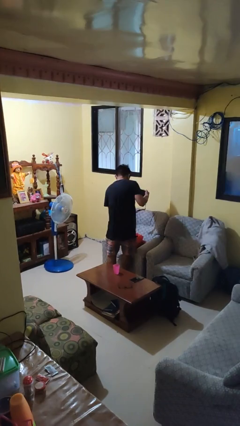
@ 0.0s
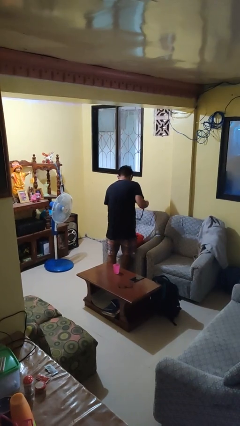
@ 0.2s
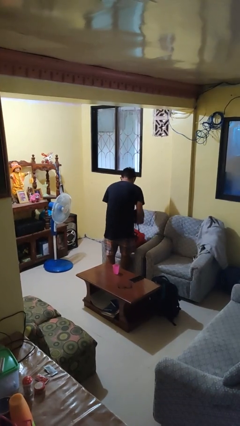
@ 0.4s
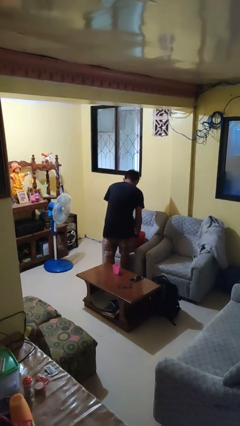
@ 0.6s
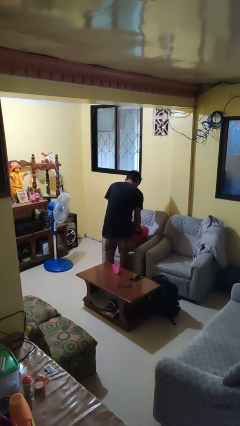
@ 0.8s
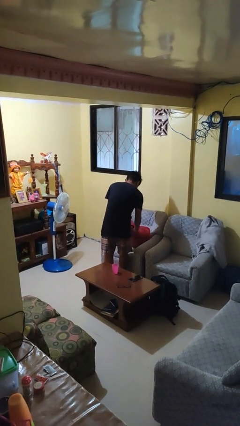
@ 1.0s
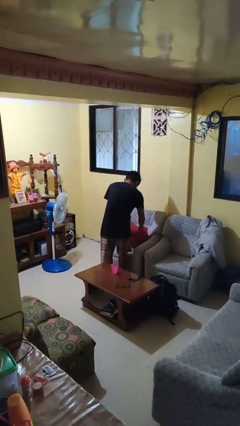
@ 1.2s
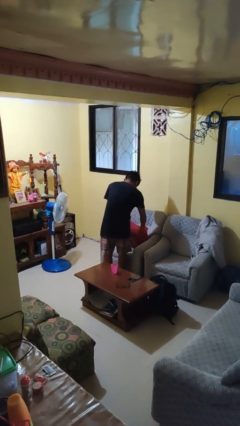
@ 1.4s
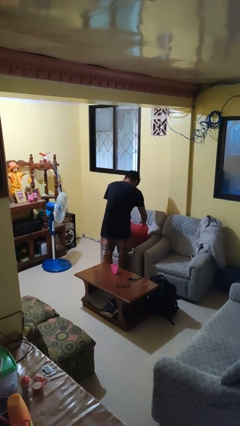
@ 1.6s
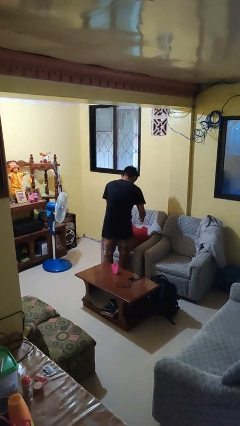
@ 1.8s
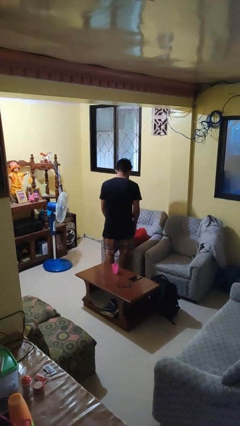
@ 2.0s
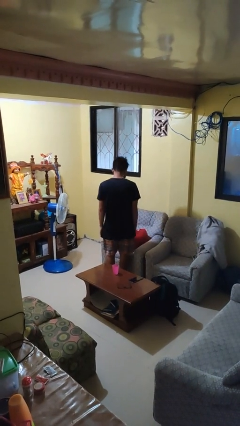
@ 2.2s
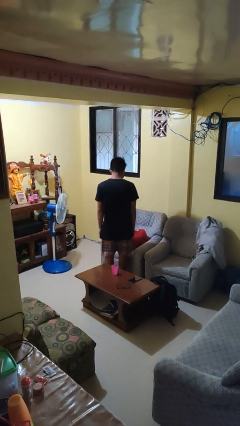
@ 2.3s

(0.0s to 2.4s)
person puts object into bag

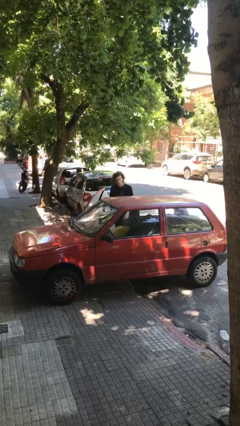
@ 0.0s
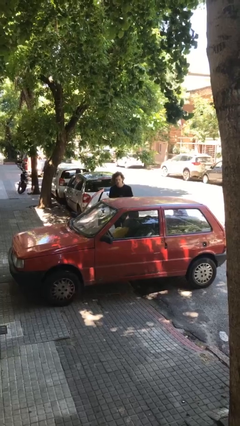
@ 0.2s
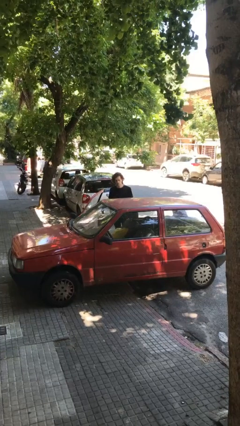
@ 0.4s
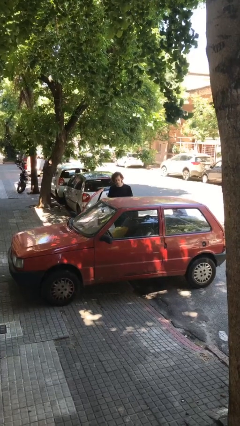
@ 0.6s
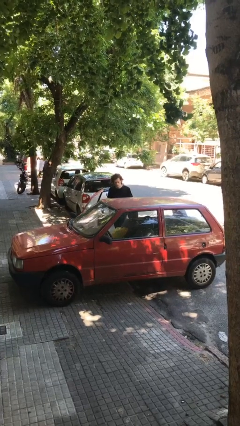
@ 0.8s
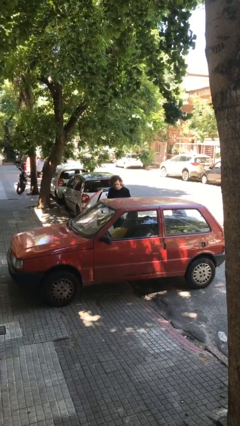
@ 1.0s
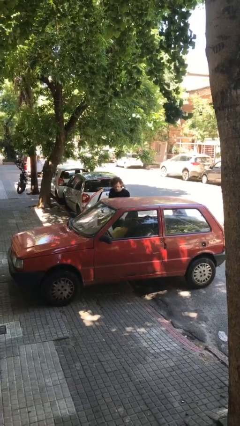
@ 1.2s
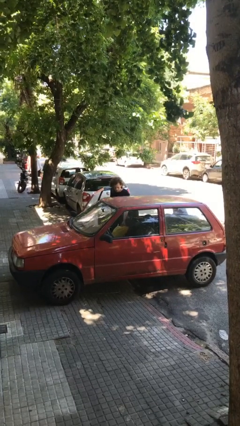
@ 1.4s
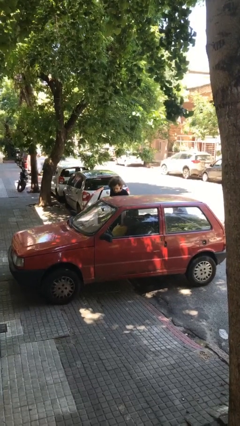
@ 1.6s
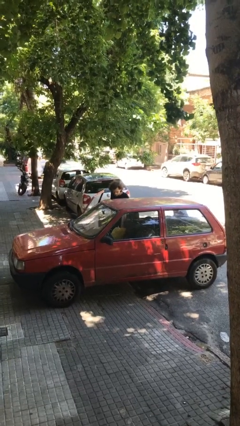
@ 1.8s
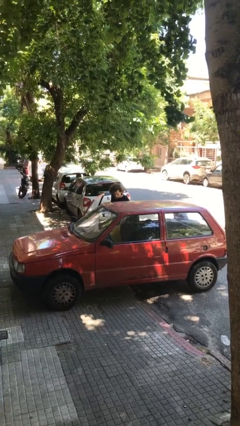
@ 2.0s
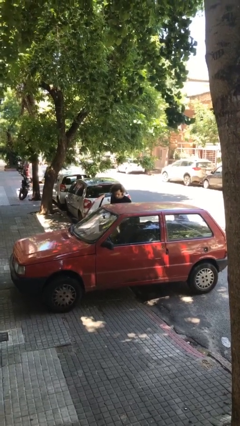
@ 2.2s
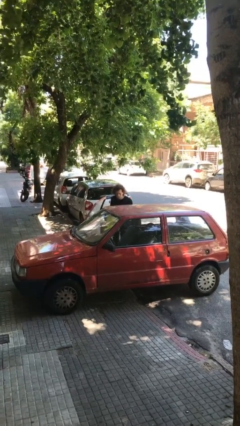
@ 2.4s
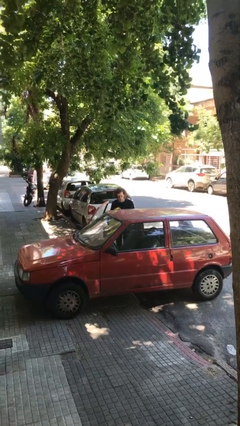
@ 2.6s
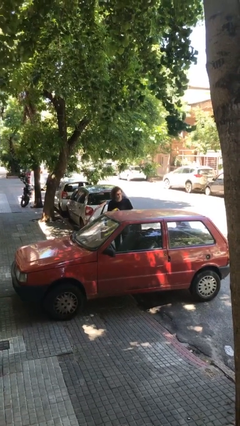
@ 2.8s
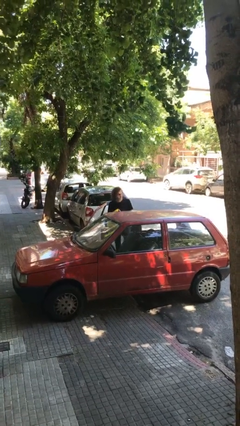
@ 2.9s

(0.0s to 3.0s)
person unloads car

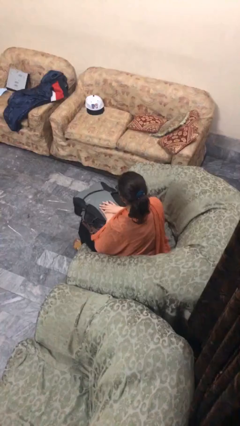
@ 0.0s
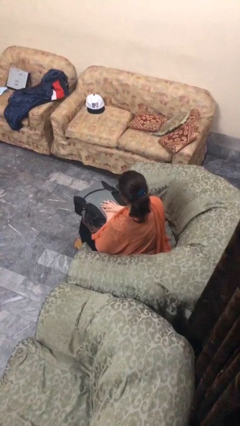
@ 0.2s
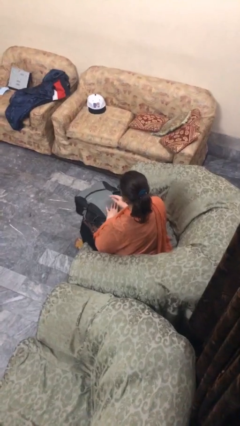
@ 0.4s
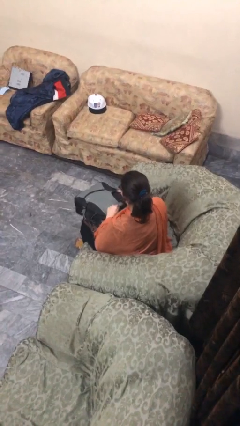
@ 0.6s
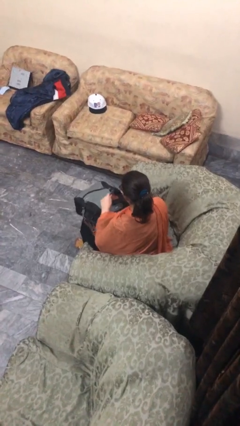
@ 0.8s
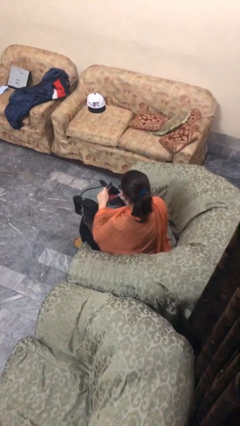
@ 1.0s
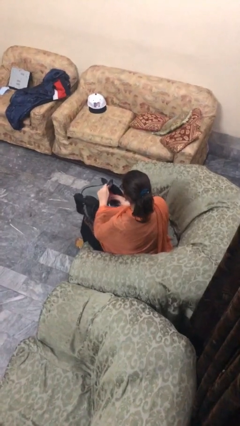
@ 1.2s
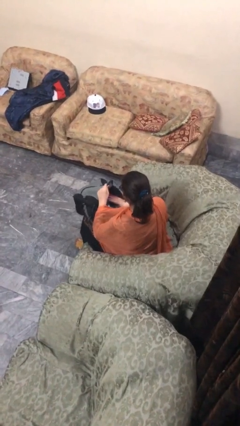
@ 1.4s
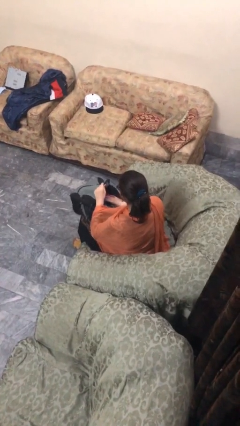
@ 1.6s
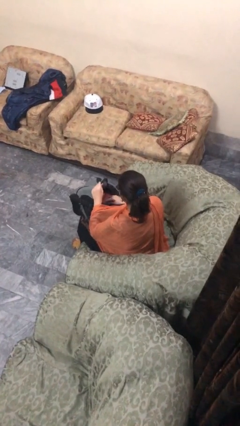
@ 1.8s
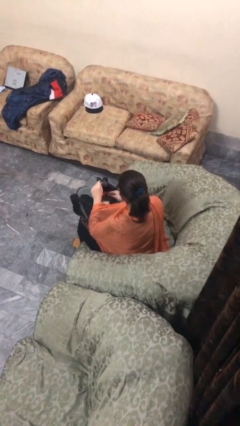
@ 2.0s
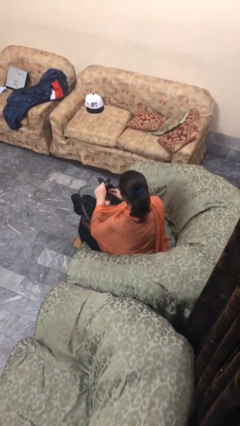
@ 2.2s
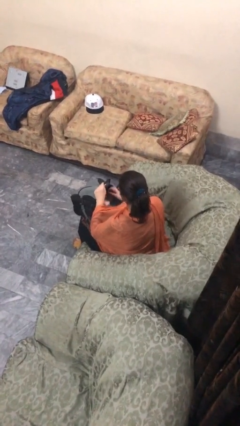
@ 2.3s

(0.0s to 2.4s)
person searches in backpack

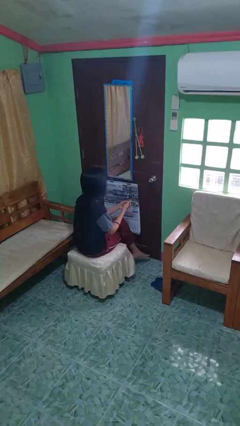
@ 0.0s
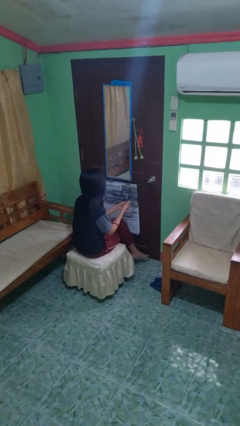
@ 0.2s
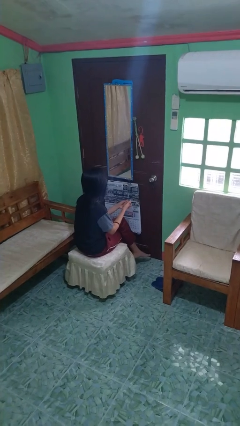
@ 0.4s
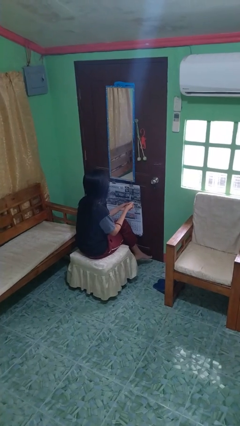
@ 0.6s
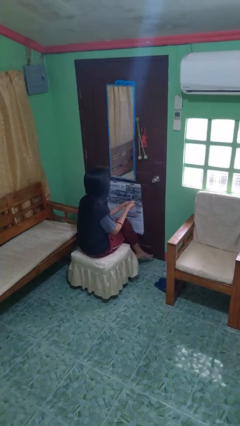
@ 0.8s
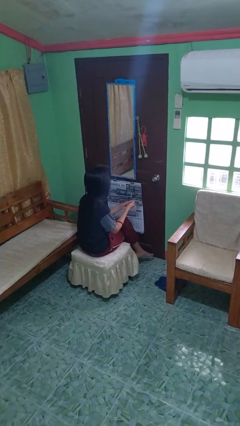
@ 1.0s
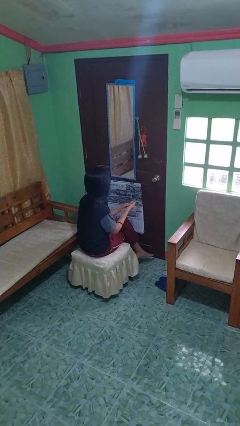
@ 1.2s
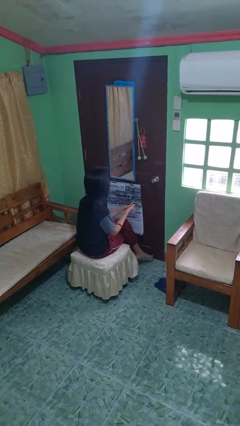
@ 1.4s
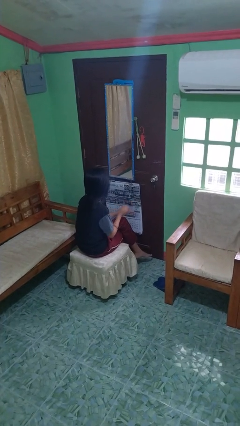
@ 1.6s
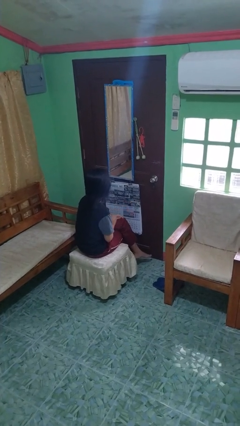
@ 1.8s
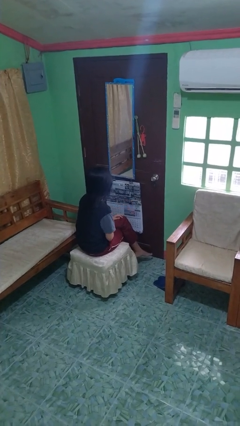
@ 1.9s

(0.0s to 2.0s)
person cracks knuckles

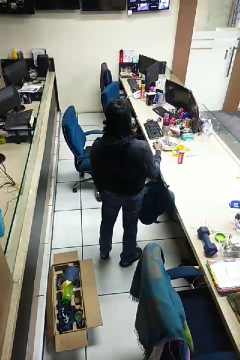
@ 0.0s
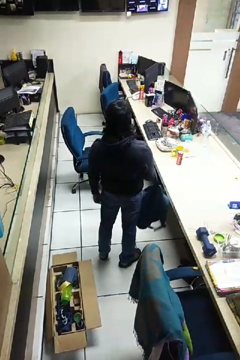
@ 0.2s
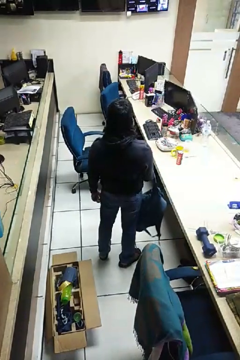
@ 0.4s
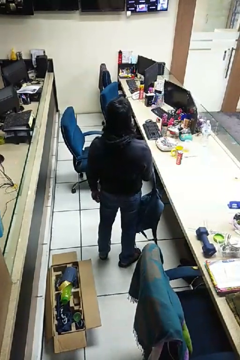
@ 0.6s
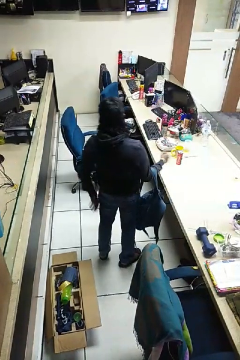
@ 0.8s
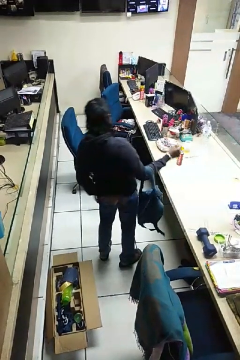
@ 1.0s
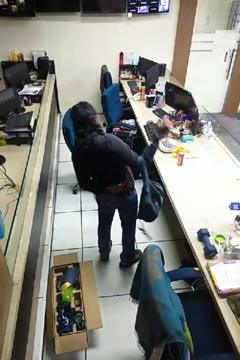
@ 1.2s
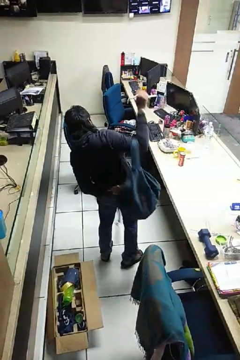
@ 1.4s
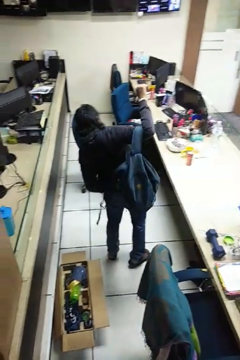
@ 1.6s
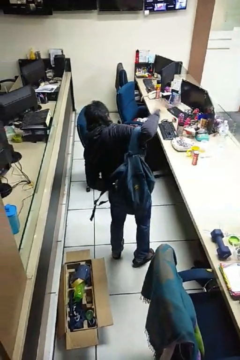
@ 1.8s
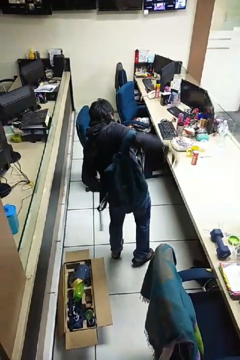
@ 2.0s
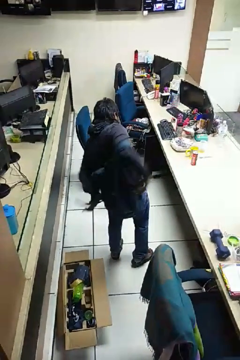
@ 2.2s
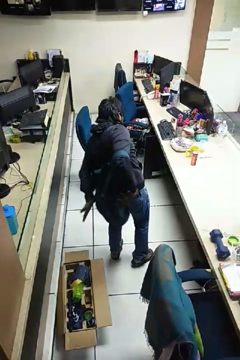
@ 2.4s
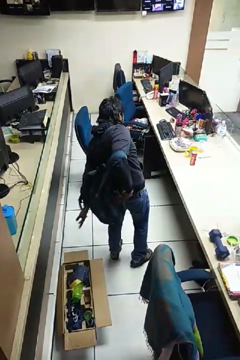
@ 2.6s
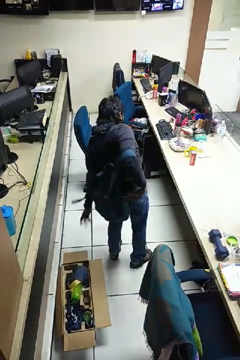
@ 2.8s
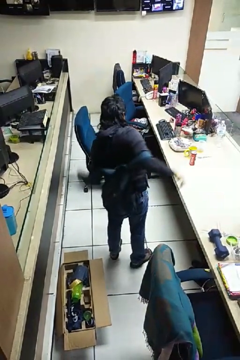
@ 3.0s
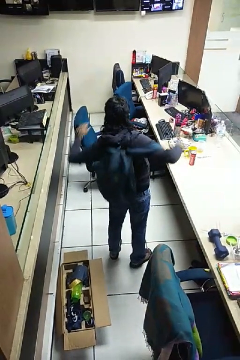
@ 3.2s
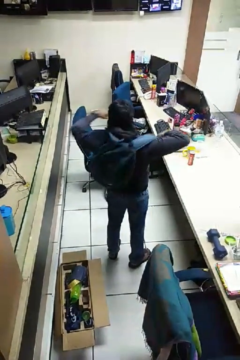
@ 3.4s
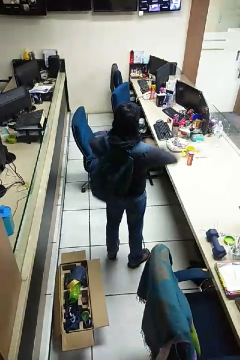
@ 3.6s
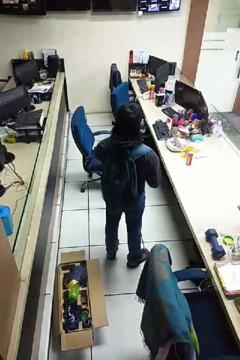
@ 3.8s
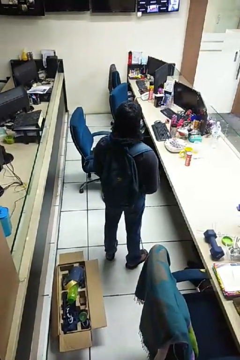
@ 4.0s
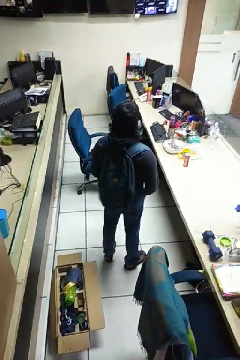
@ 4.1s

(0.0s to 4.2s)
person puts on backpack

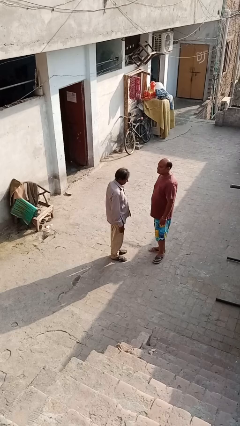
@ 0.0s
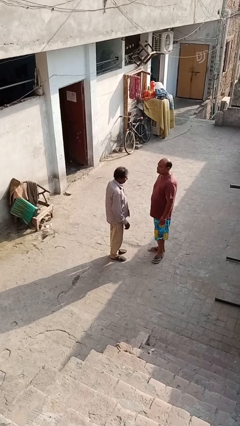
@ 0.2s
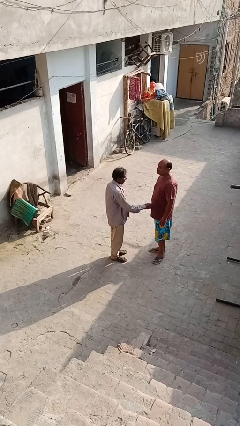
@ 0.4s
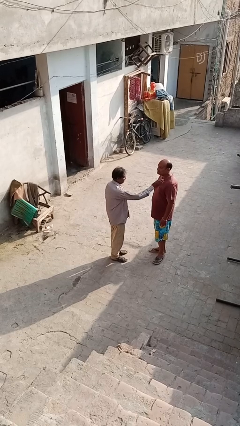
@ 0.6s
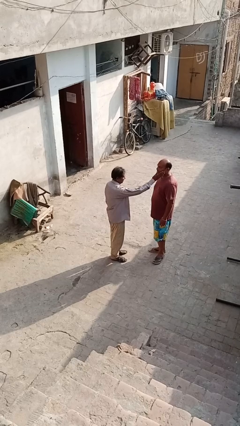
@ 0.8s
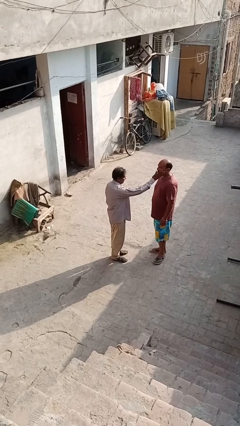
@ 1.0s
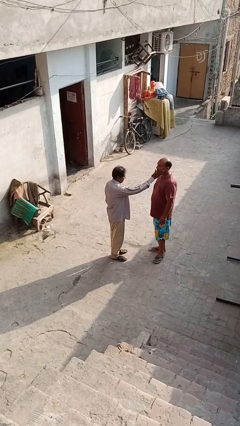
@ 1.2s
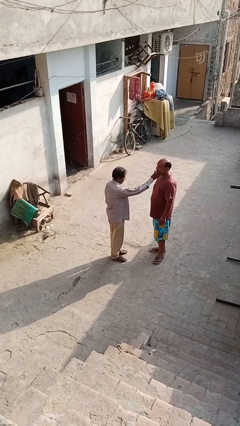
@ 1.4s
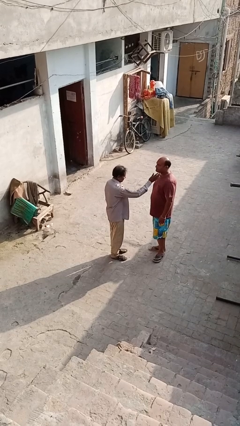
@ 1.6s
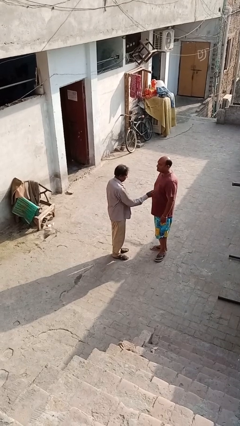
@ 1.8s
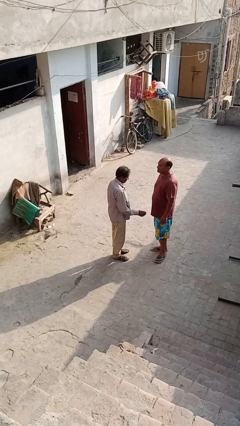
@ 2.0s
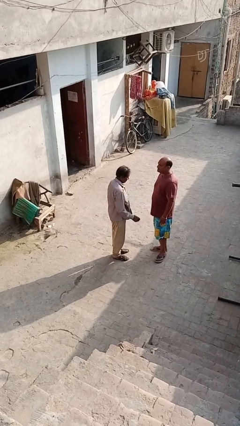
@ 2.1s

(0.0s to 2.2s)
person touches face of person

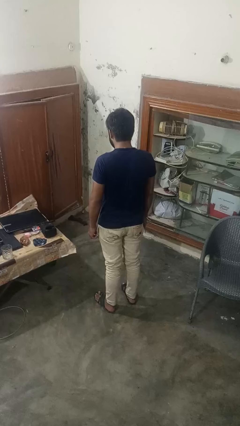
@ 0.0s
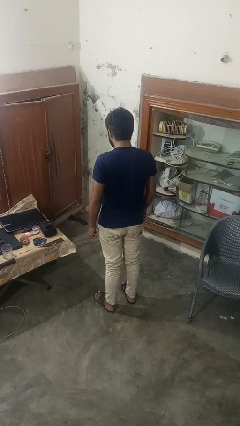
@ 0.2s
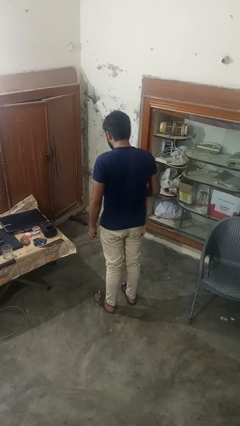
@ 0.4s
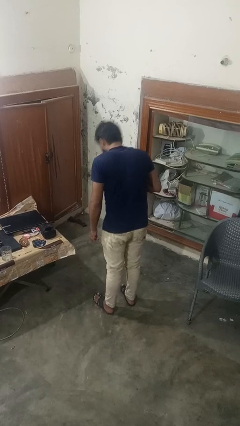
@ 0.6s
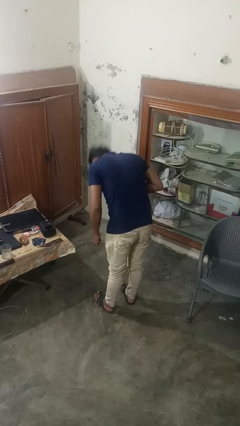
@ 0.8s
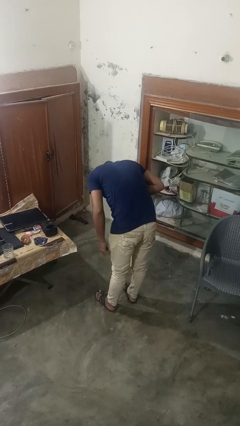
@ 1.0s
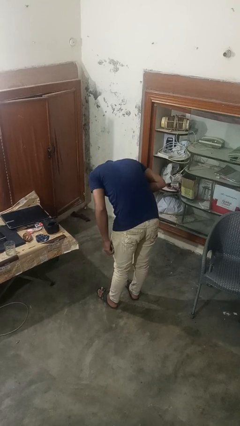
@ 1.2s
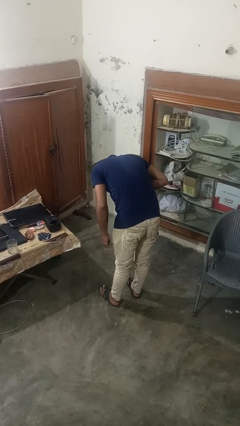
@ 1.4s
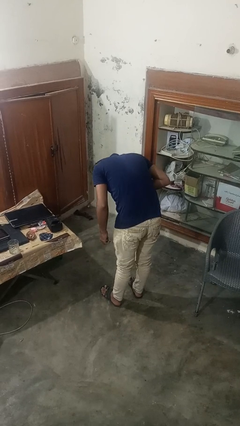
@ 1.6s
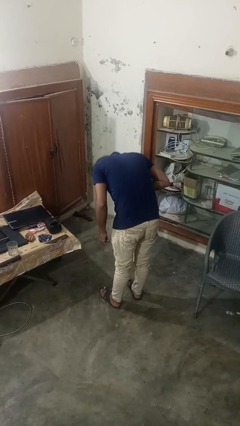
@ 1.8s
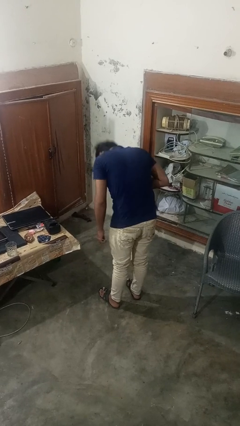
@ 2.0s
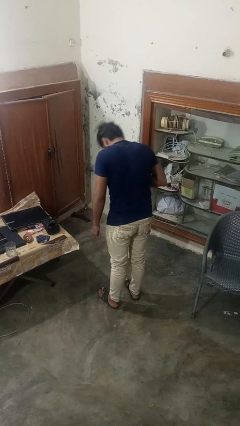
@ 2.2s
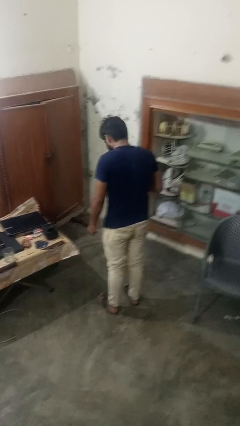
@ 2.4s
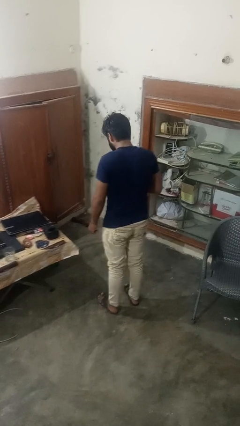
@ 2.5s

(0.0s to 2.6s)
person bows
